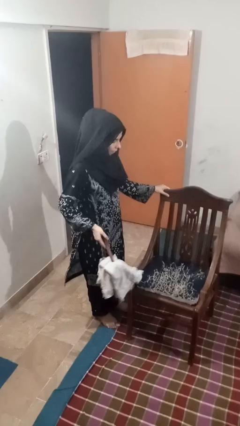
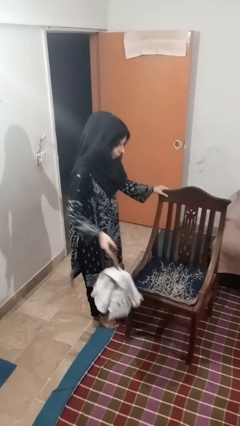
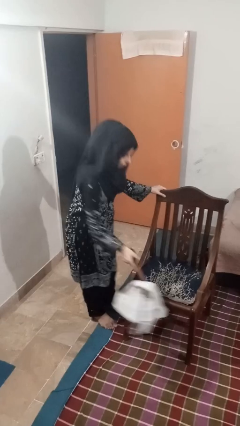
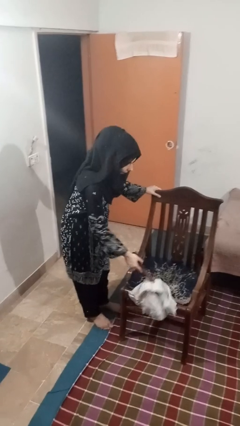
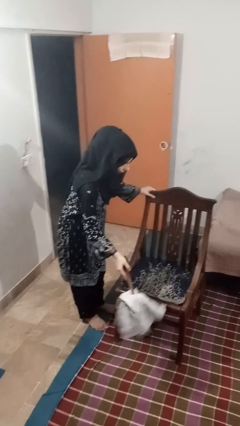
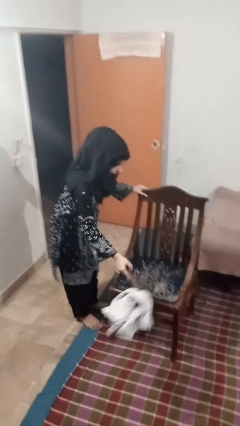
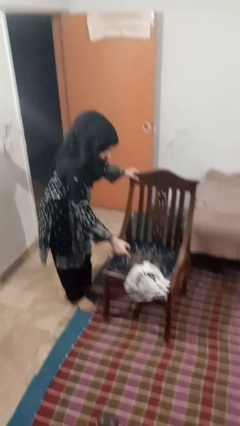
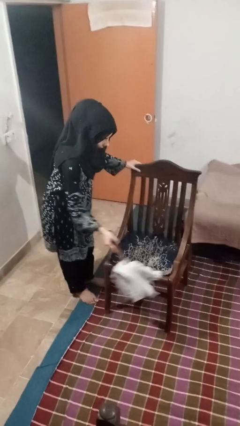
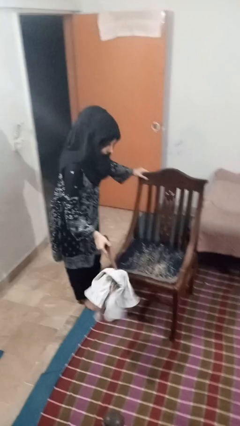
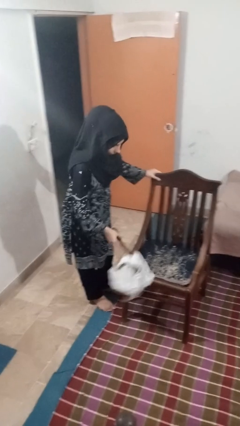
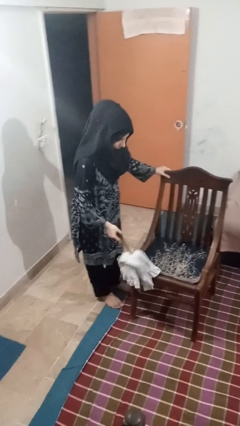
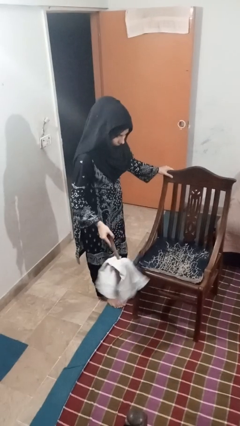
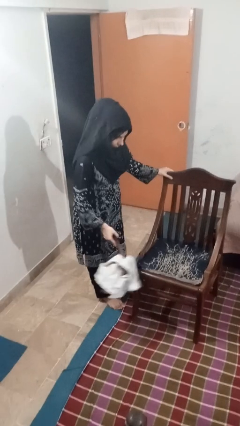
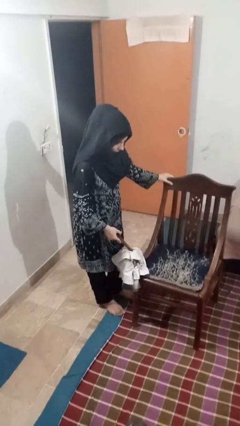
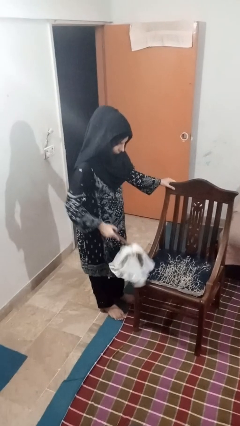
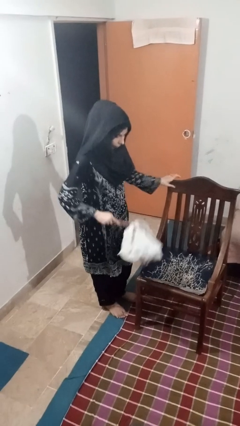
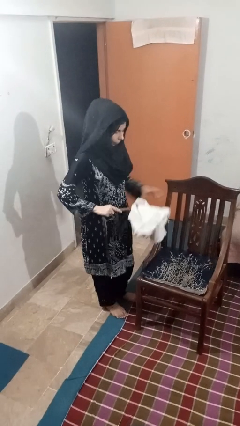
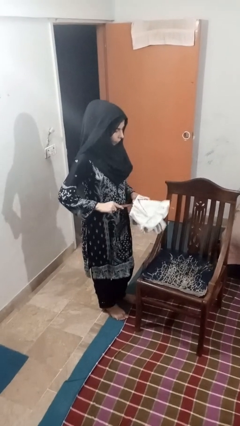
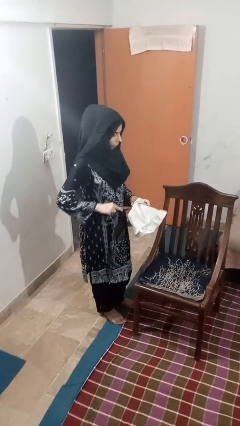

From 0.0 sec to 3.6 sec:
person dusts furniture

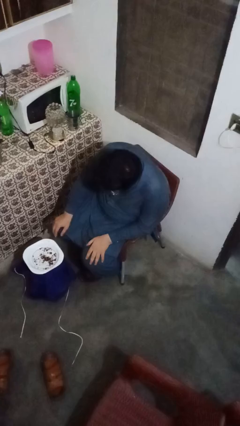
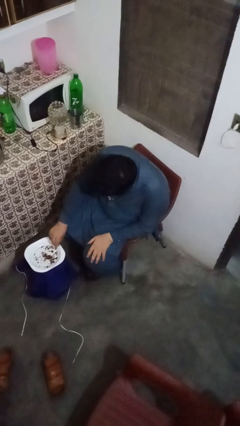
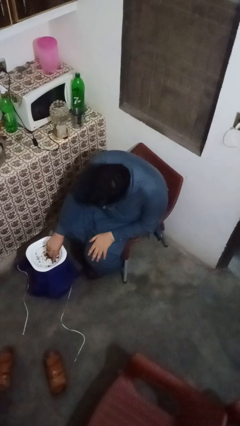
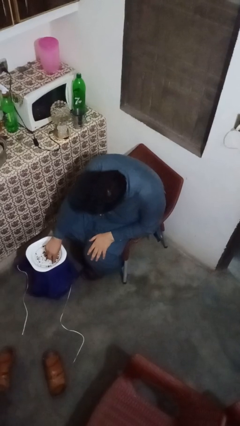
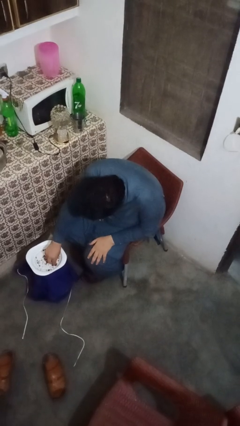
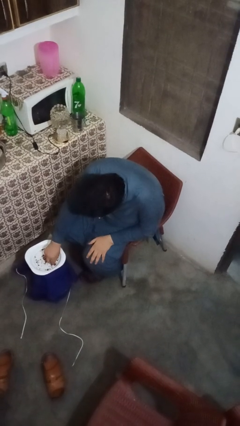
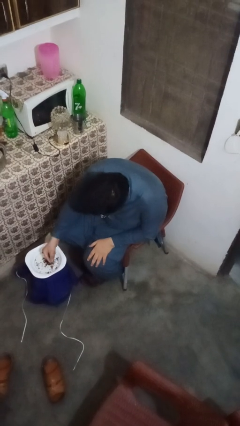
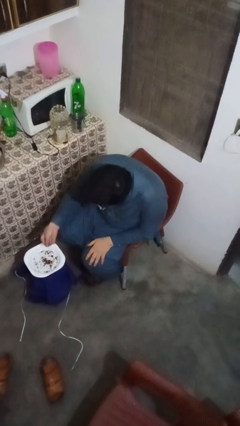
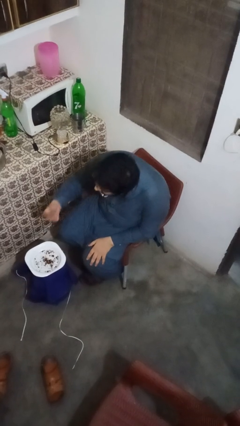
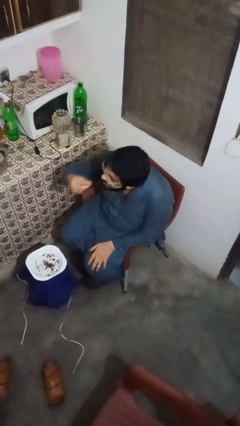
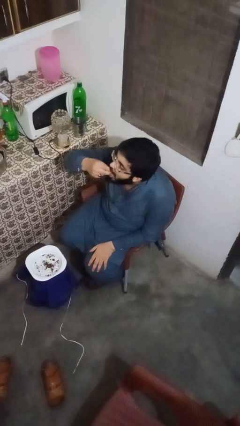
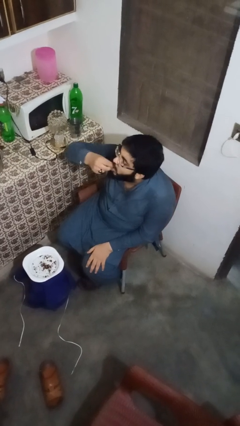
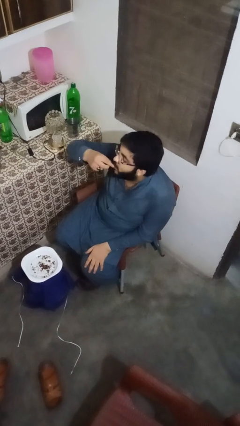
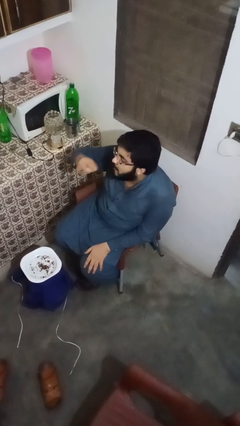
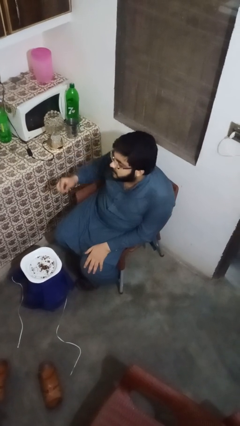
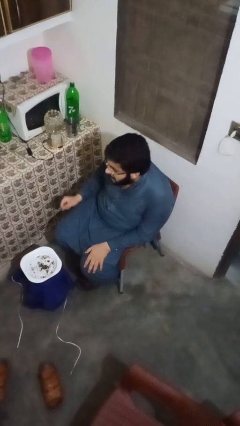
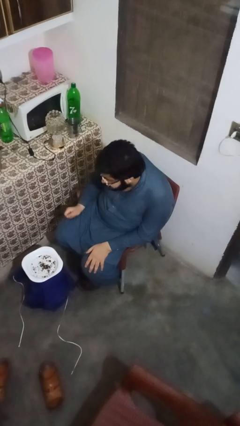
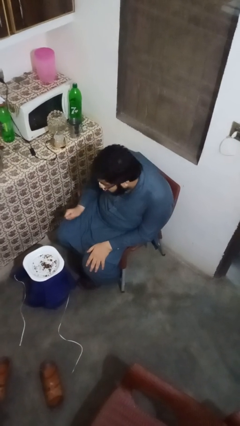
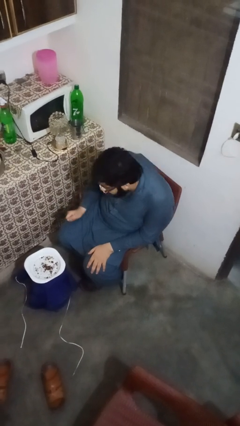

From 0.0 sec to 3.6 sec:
person eats with hands

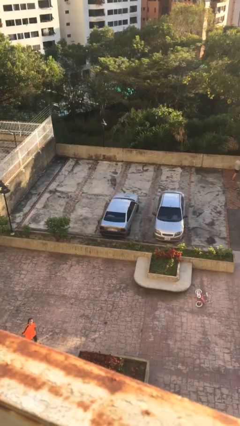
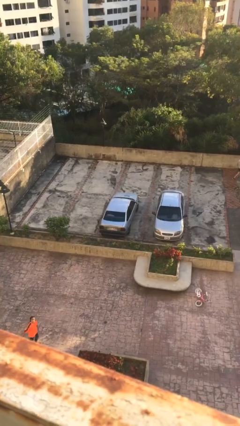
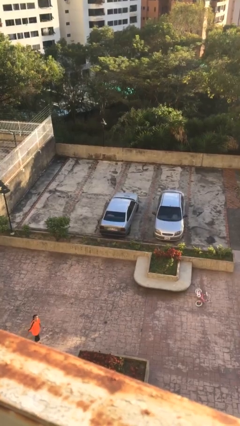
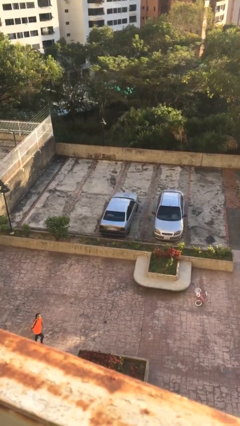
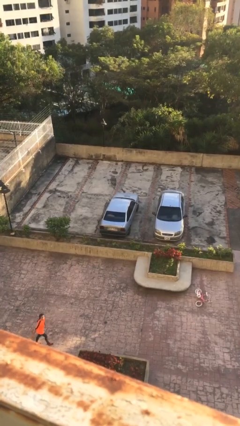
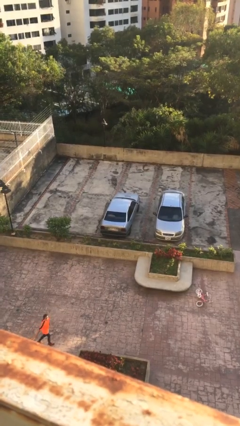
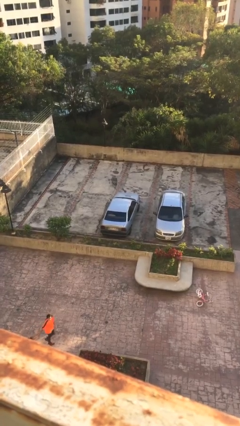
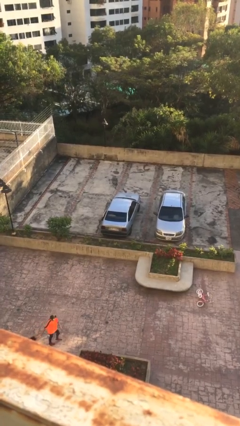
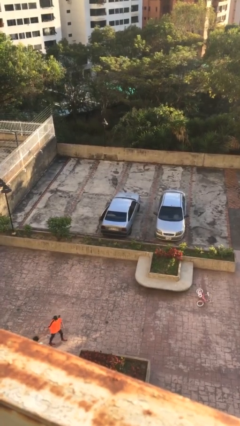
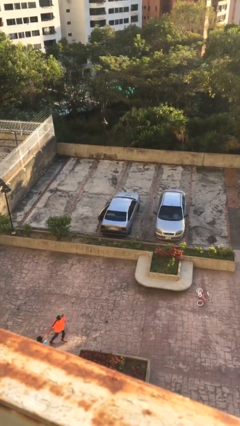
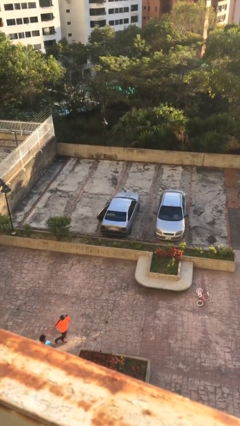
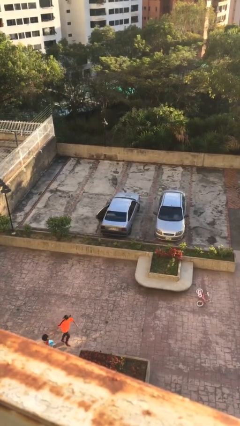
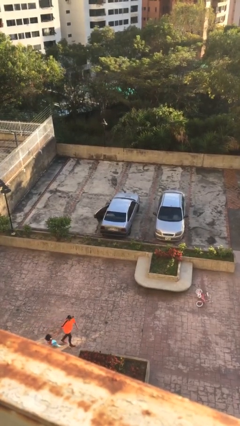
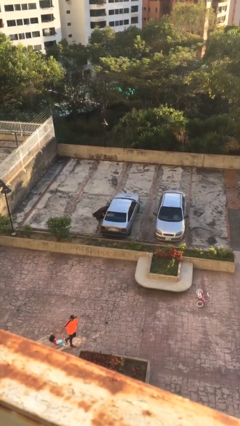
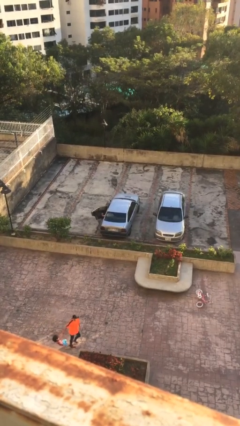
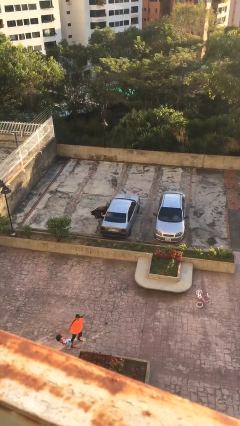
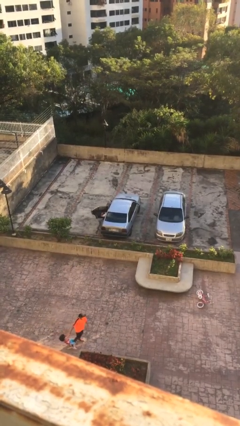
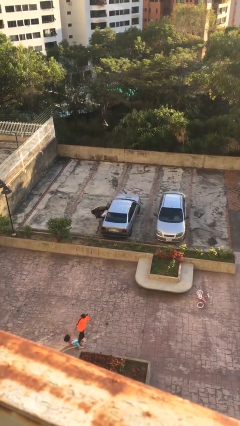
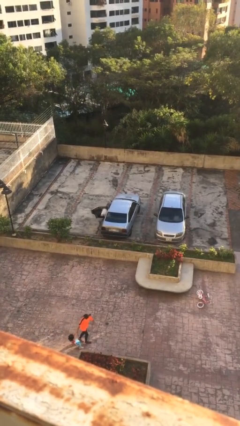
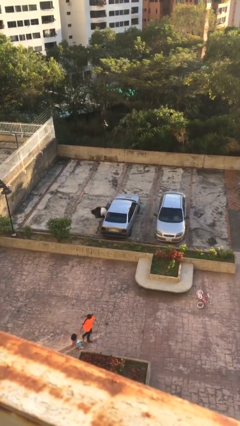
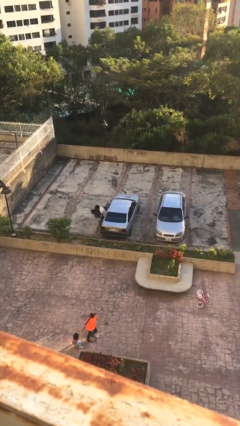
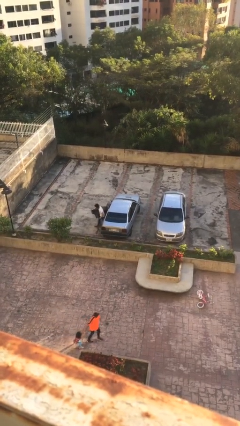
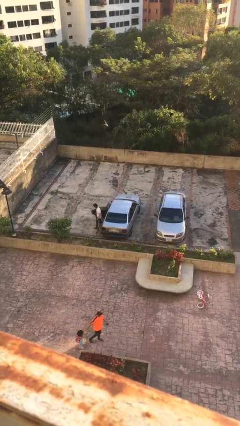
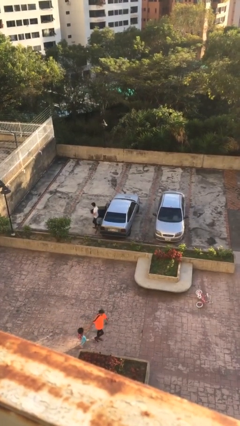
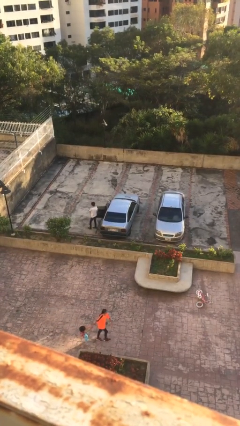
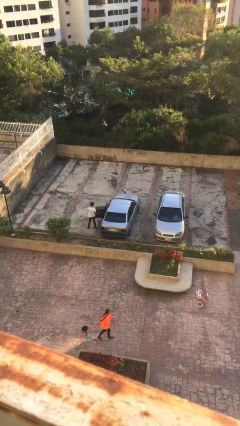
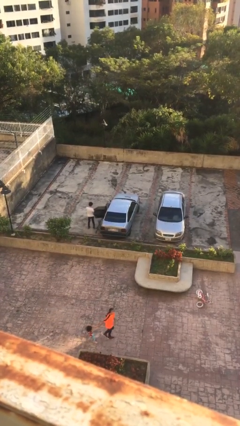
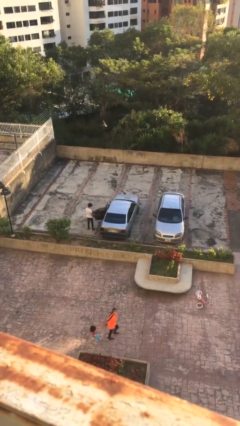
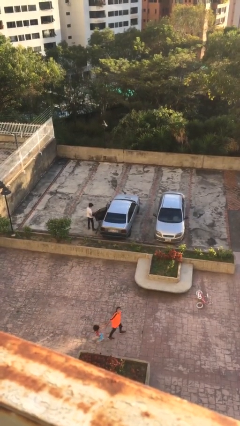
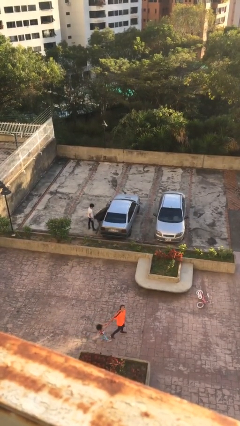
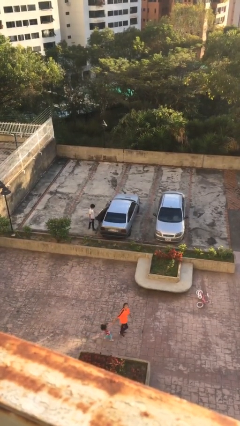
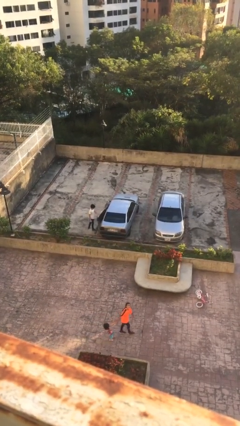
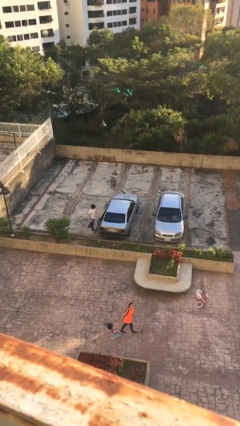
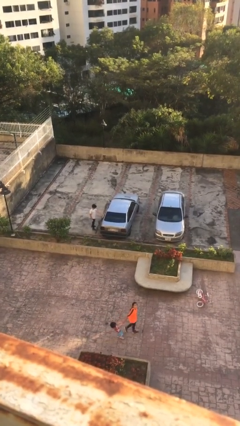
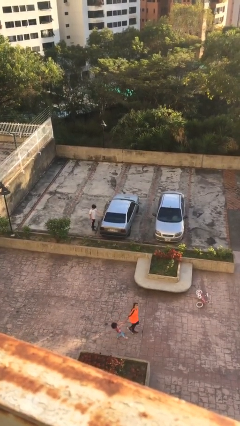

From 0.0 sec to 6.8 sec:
car drops off person

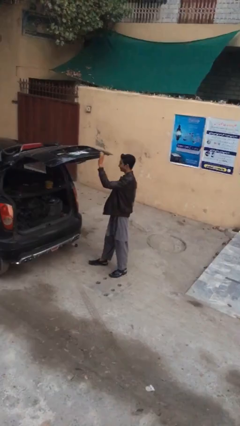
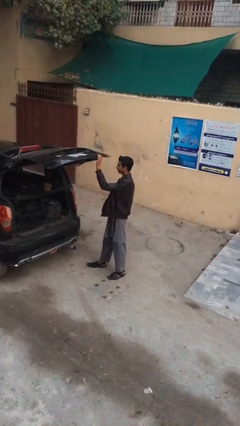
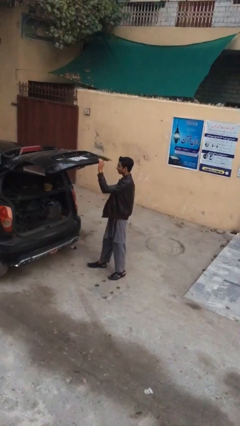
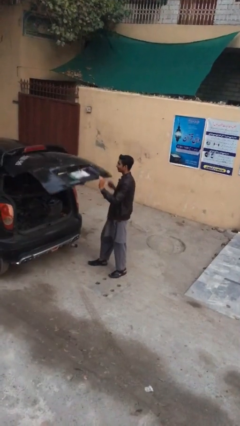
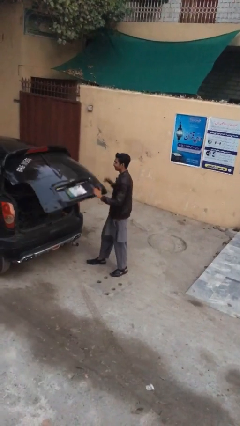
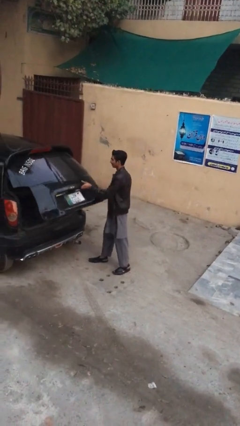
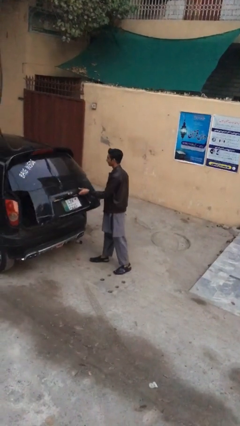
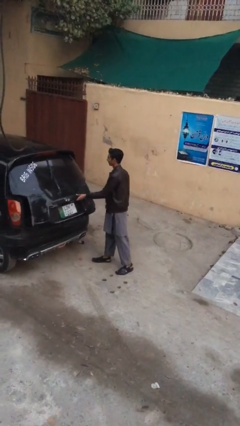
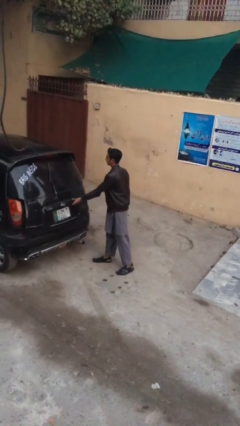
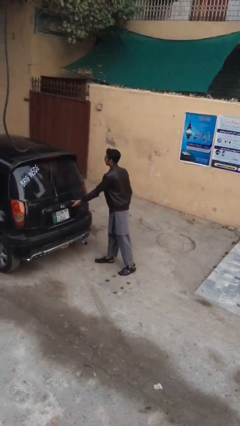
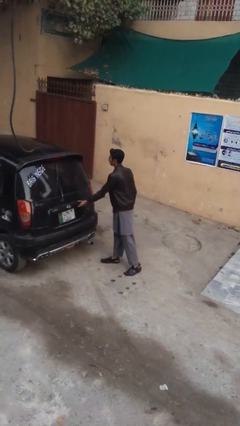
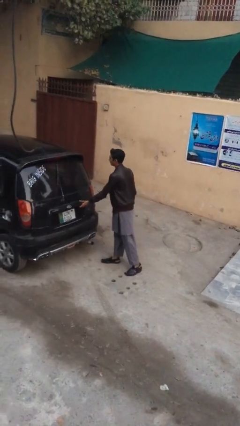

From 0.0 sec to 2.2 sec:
person closes car trunk

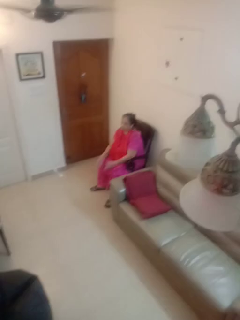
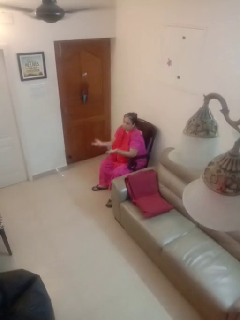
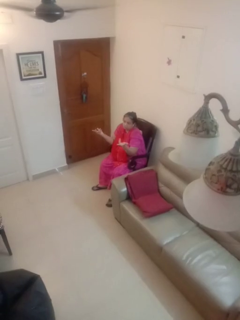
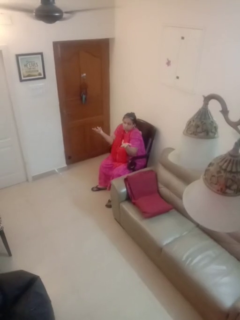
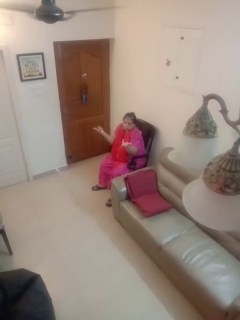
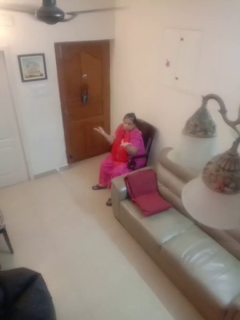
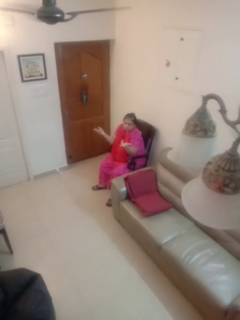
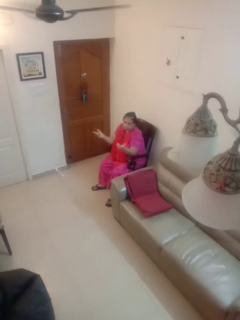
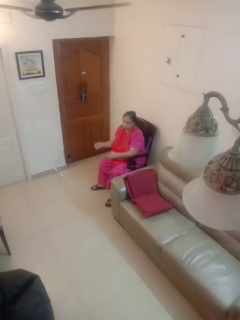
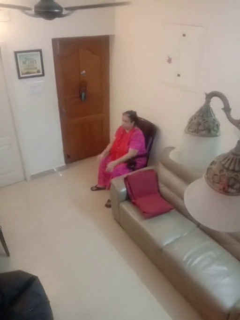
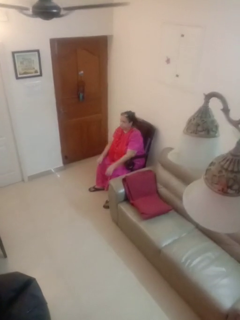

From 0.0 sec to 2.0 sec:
person shrugs
